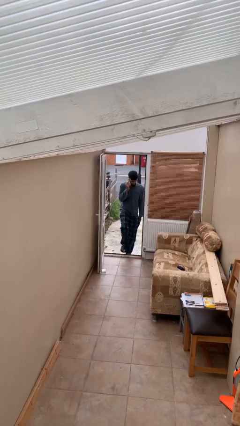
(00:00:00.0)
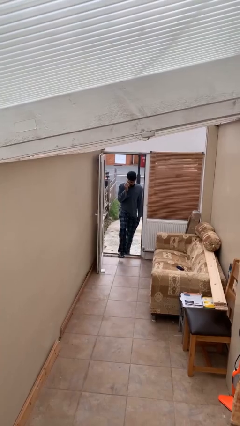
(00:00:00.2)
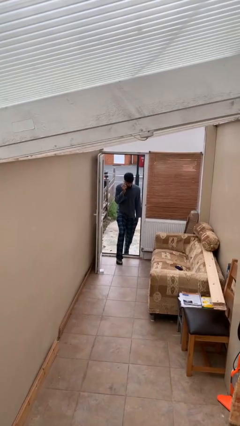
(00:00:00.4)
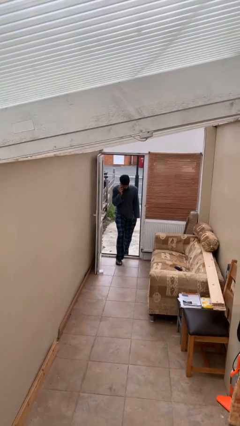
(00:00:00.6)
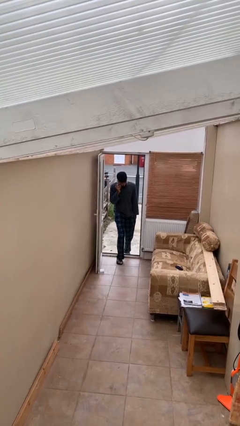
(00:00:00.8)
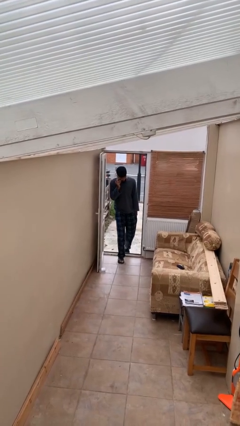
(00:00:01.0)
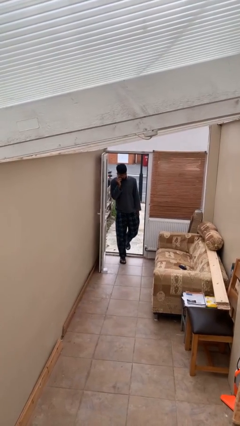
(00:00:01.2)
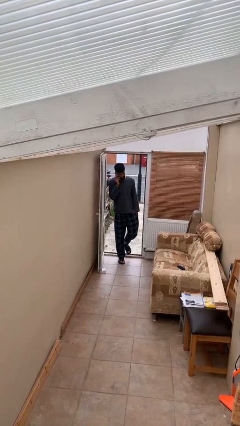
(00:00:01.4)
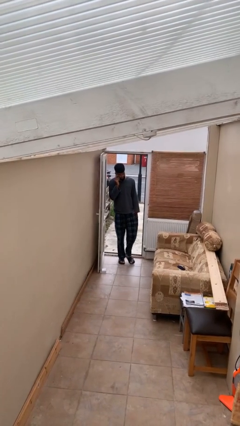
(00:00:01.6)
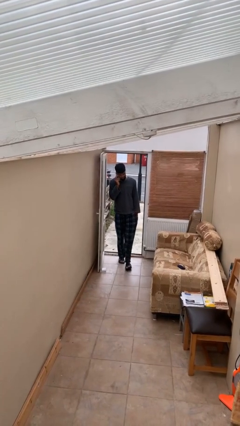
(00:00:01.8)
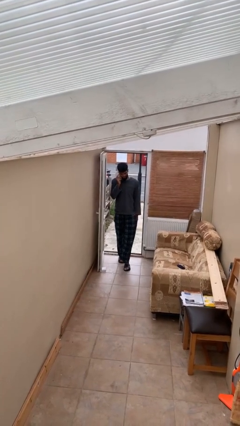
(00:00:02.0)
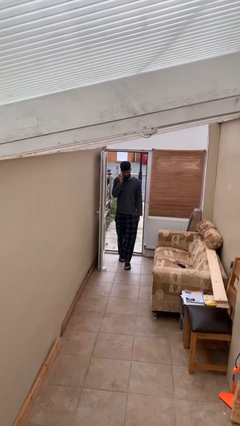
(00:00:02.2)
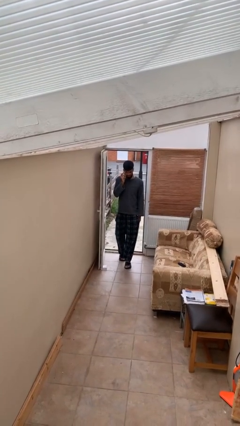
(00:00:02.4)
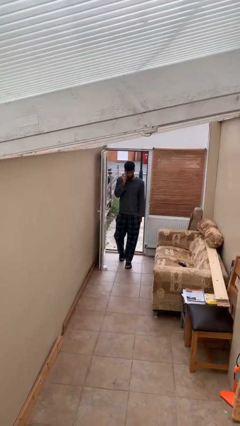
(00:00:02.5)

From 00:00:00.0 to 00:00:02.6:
person enters scene through structure

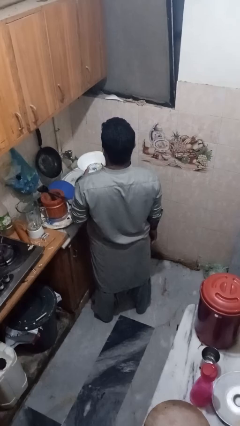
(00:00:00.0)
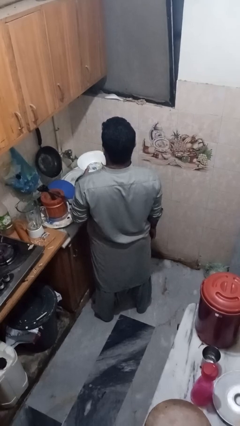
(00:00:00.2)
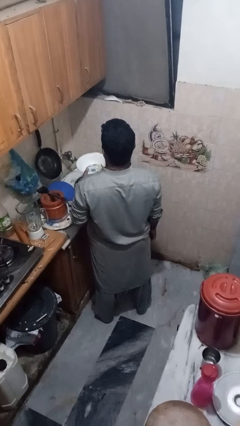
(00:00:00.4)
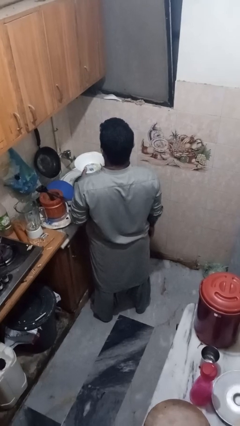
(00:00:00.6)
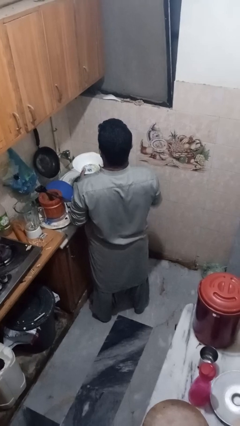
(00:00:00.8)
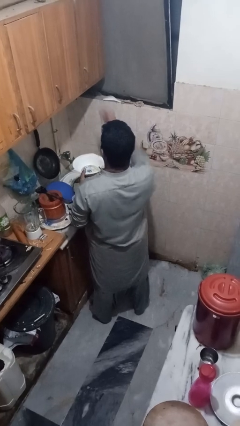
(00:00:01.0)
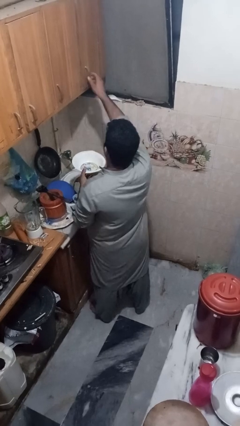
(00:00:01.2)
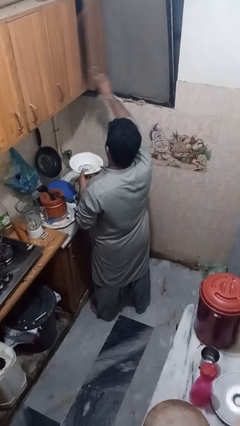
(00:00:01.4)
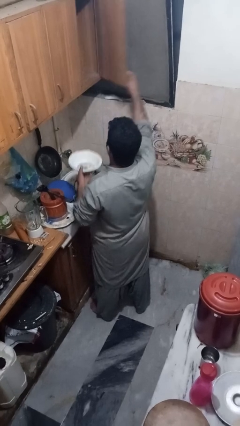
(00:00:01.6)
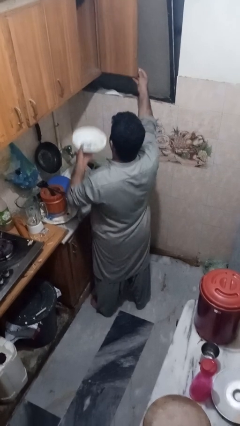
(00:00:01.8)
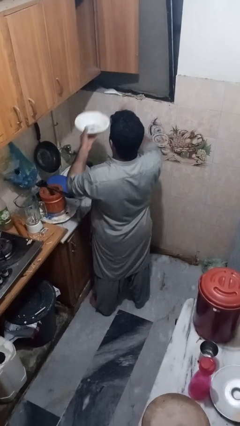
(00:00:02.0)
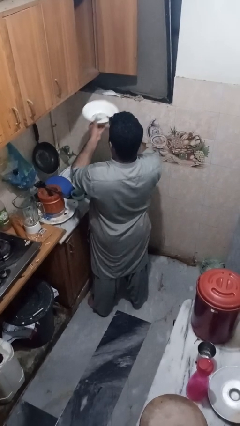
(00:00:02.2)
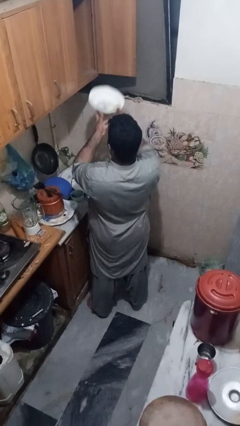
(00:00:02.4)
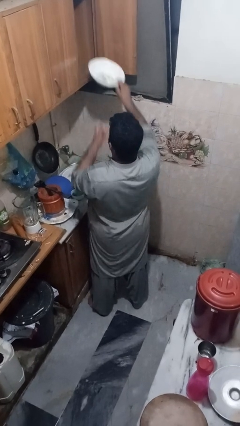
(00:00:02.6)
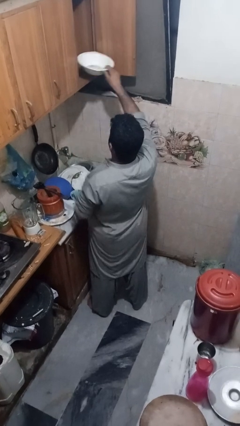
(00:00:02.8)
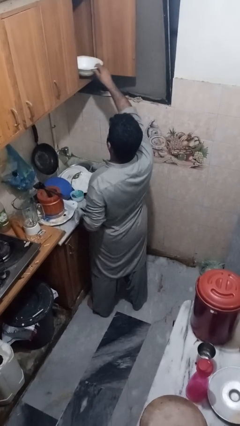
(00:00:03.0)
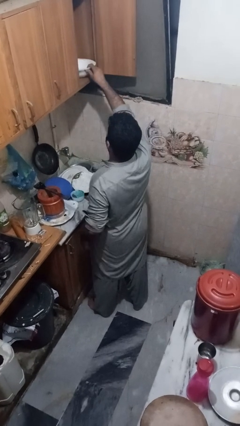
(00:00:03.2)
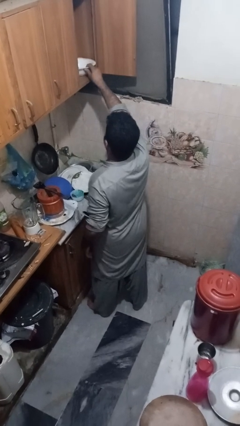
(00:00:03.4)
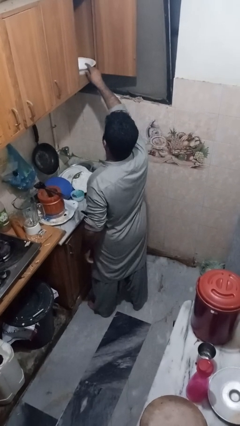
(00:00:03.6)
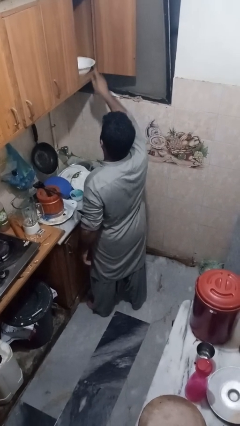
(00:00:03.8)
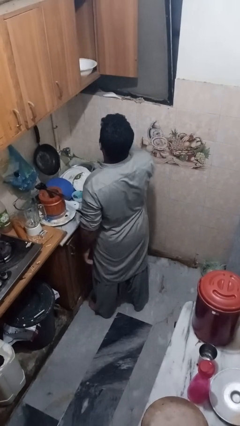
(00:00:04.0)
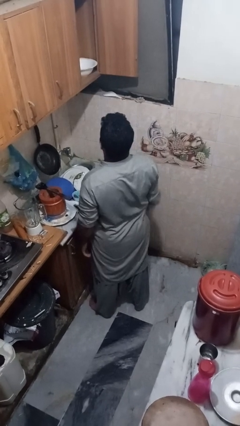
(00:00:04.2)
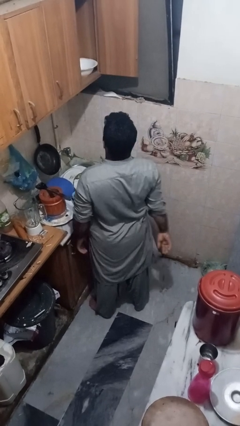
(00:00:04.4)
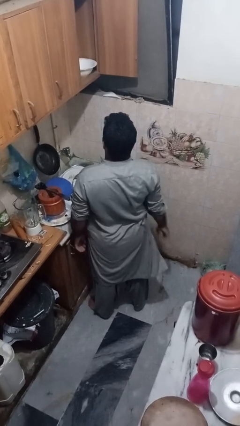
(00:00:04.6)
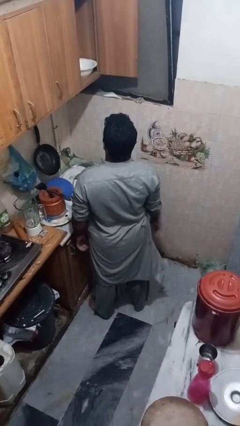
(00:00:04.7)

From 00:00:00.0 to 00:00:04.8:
person puts object in cabinet

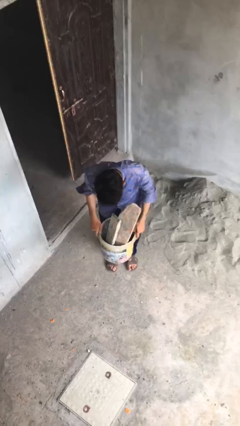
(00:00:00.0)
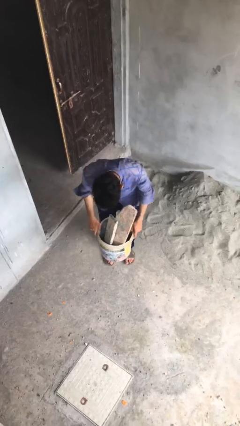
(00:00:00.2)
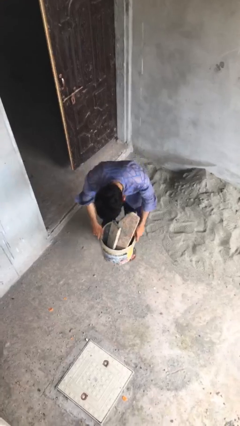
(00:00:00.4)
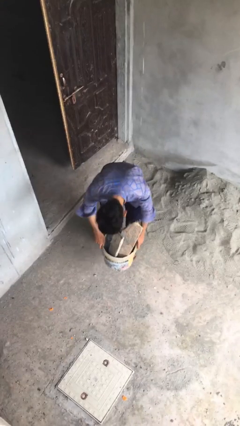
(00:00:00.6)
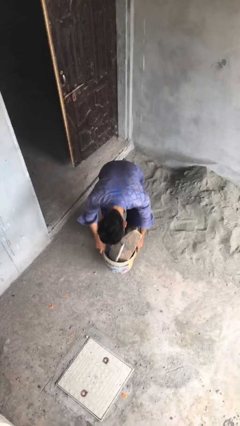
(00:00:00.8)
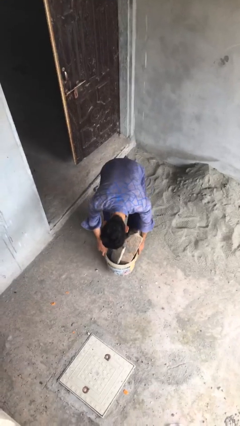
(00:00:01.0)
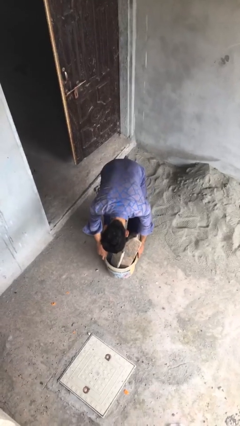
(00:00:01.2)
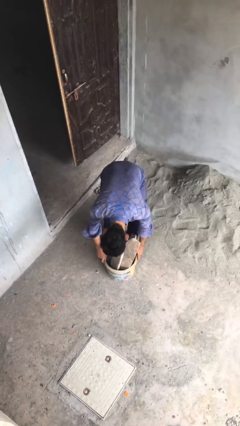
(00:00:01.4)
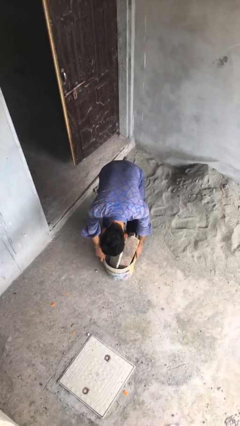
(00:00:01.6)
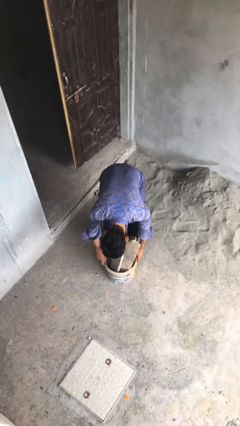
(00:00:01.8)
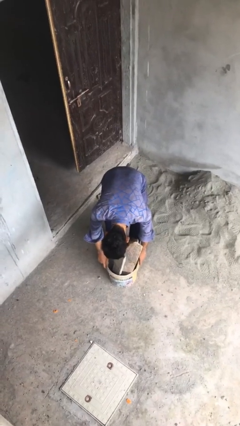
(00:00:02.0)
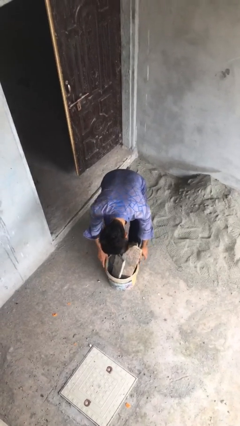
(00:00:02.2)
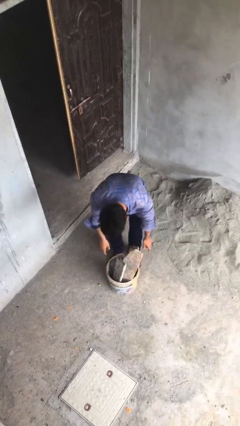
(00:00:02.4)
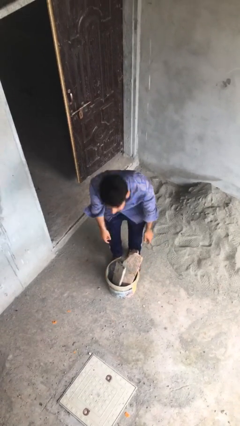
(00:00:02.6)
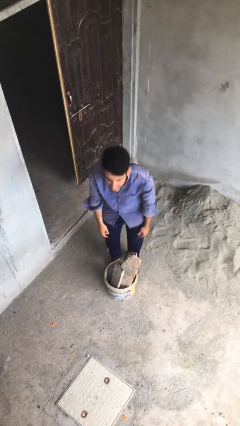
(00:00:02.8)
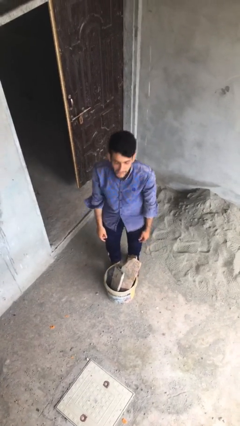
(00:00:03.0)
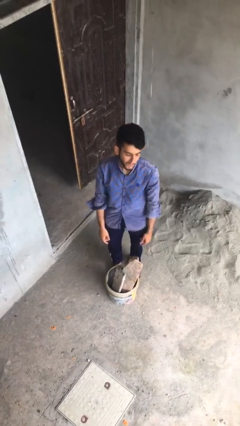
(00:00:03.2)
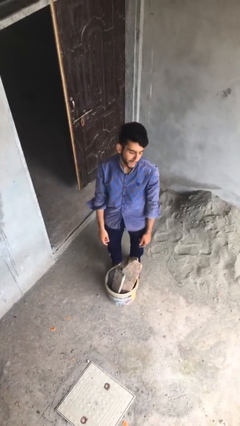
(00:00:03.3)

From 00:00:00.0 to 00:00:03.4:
person puts down object on floor

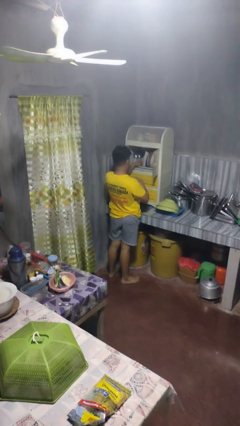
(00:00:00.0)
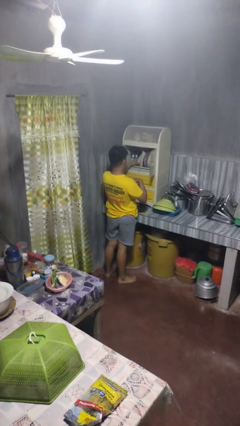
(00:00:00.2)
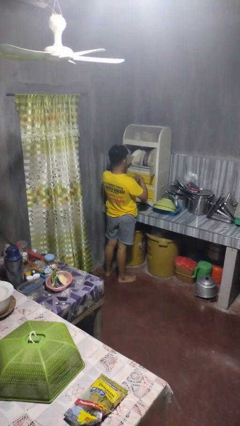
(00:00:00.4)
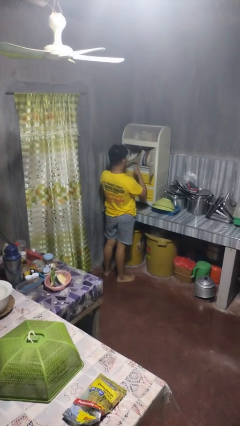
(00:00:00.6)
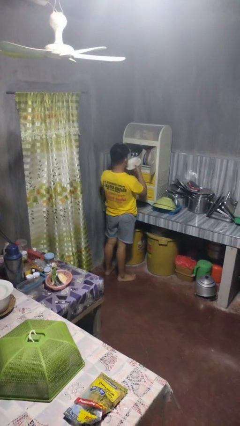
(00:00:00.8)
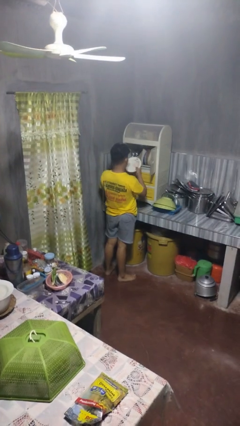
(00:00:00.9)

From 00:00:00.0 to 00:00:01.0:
person takes object from cabinet

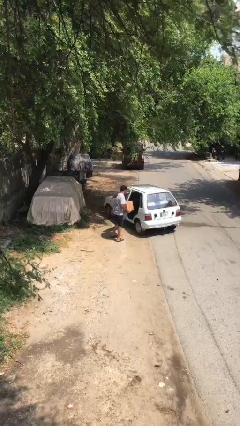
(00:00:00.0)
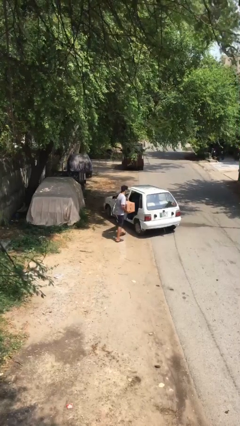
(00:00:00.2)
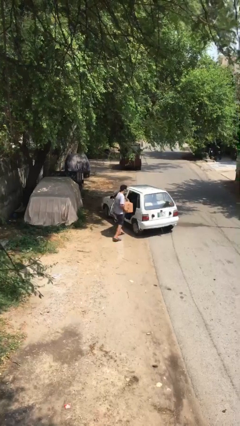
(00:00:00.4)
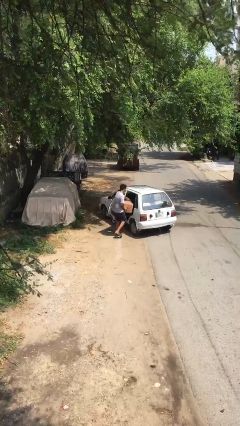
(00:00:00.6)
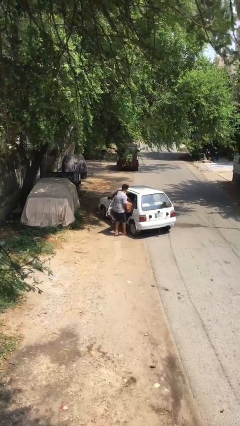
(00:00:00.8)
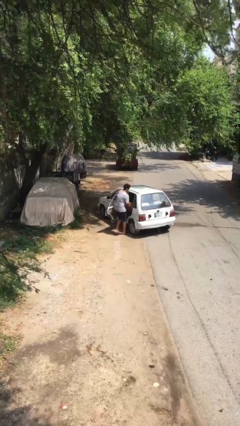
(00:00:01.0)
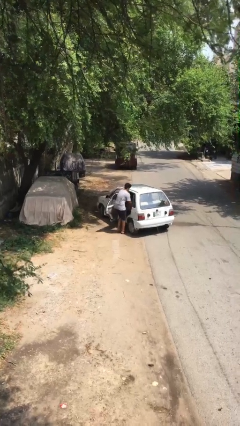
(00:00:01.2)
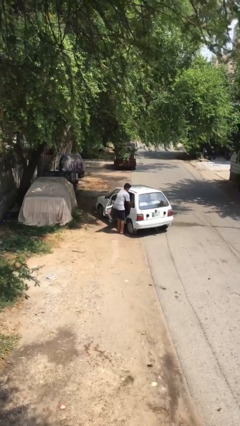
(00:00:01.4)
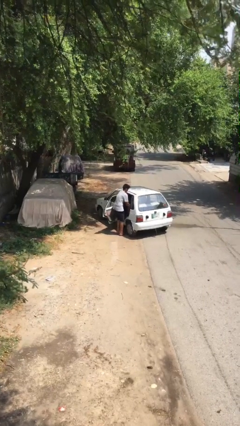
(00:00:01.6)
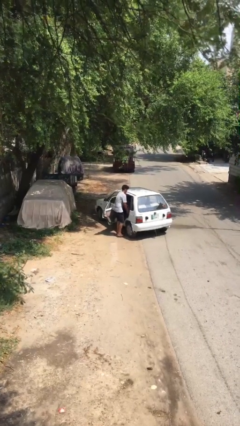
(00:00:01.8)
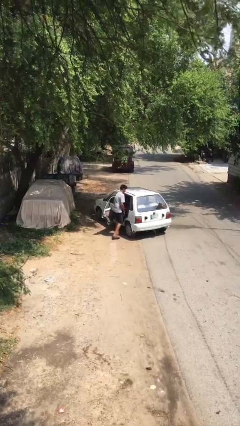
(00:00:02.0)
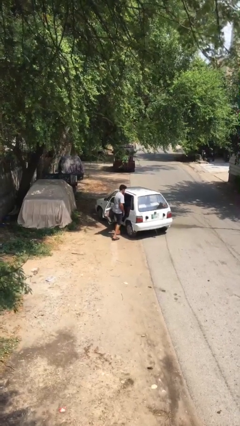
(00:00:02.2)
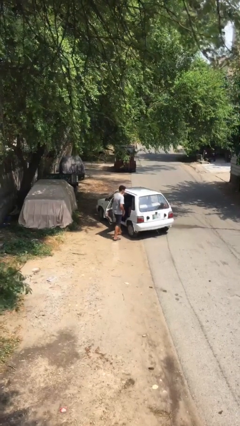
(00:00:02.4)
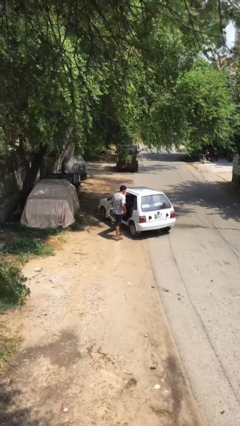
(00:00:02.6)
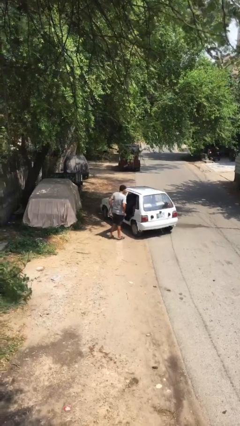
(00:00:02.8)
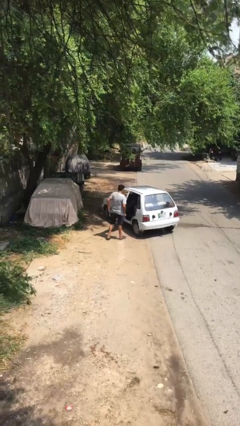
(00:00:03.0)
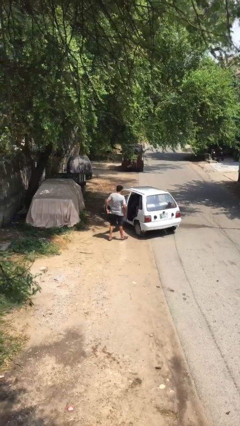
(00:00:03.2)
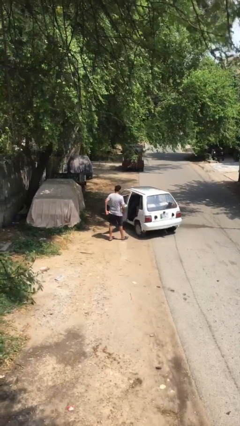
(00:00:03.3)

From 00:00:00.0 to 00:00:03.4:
person loads car

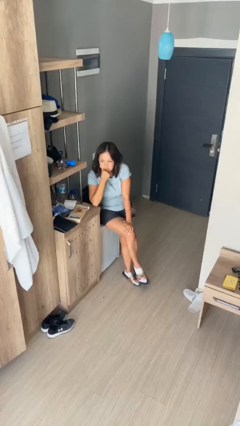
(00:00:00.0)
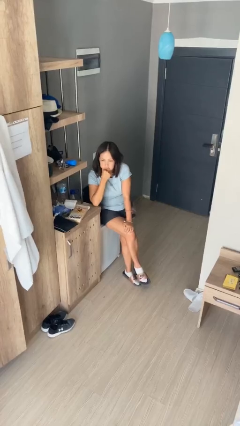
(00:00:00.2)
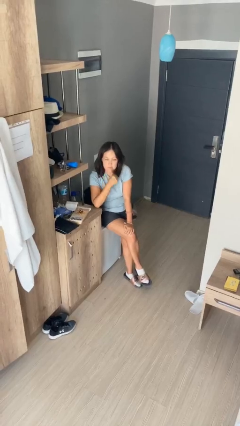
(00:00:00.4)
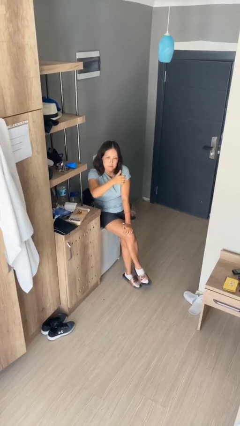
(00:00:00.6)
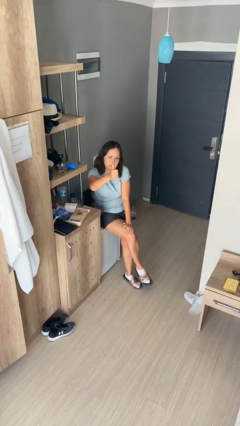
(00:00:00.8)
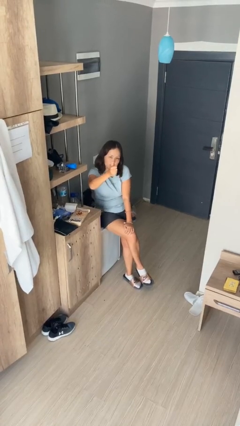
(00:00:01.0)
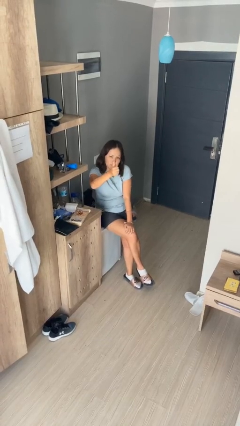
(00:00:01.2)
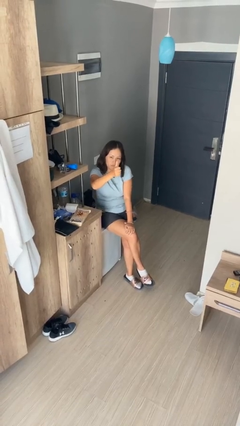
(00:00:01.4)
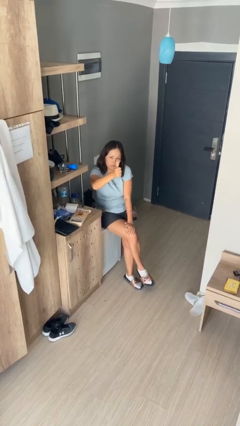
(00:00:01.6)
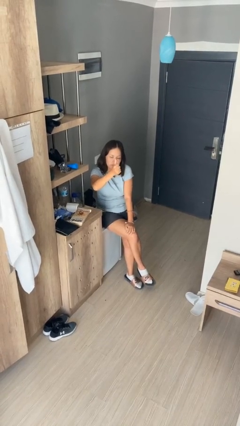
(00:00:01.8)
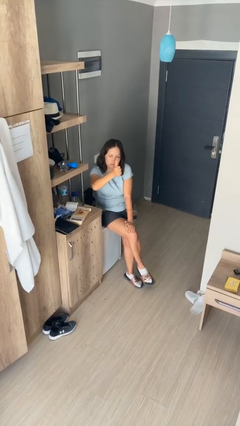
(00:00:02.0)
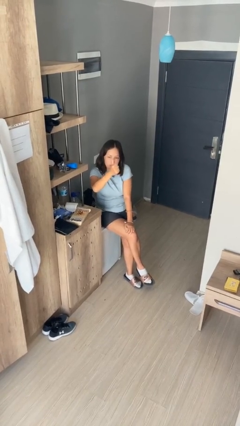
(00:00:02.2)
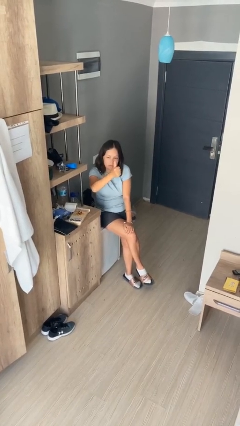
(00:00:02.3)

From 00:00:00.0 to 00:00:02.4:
person gestures thumbs up
